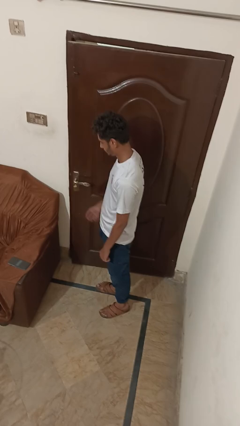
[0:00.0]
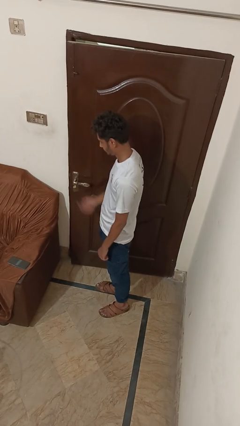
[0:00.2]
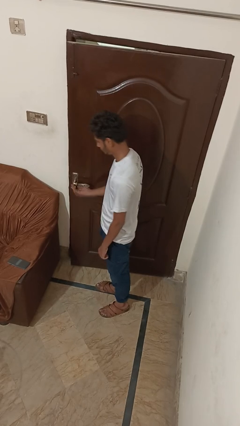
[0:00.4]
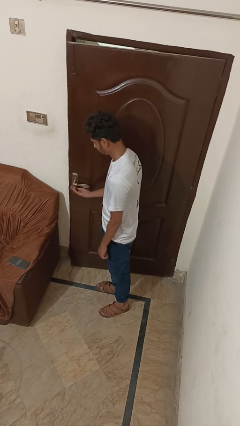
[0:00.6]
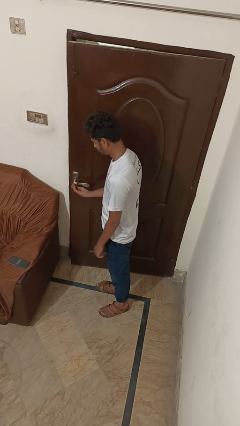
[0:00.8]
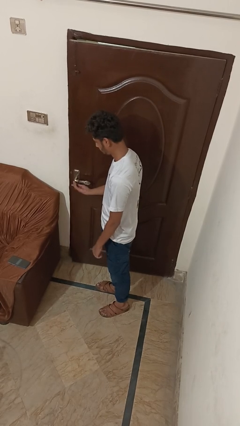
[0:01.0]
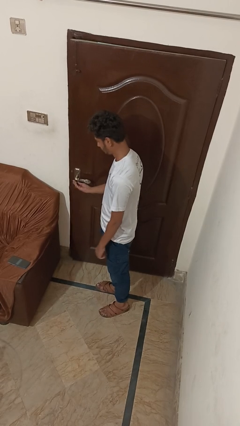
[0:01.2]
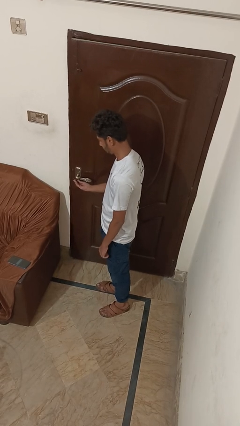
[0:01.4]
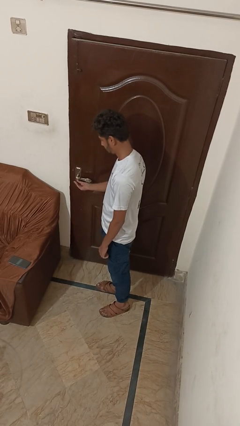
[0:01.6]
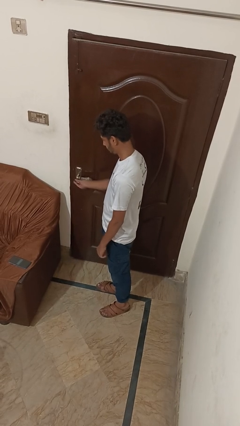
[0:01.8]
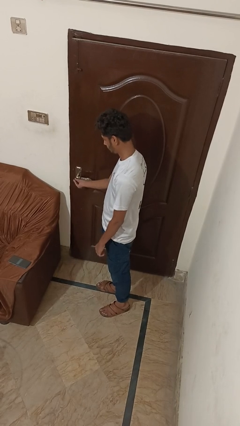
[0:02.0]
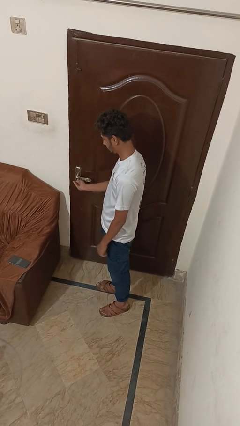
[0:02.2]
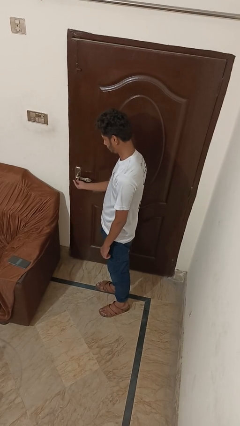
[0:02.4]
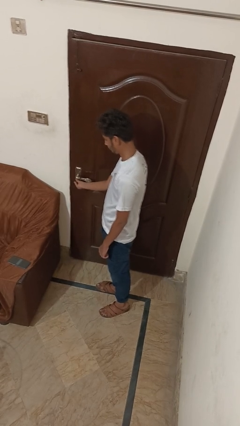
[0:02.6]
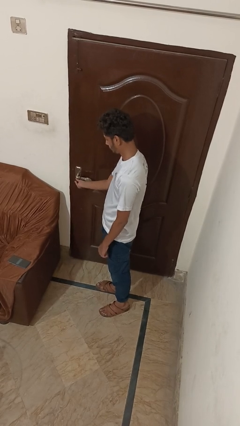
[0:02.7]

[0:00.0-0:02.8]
person locks door with keys

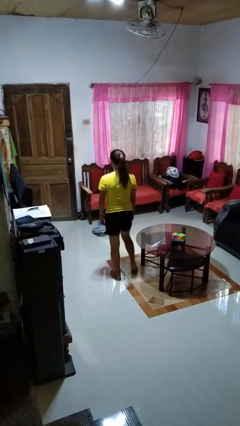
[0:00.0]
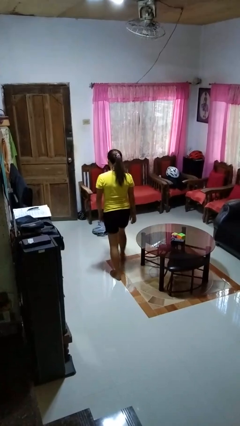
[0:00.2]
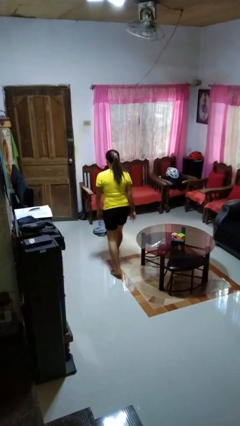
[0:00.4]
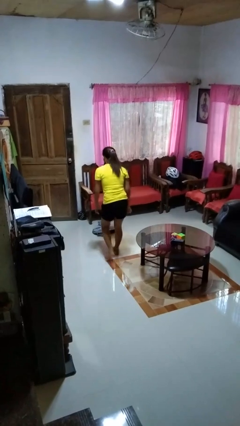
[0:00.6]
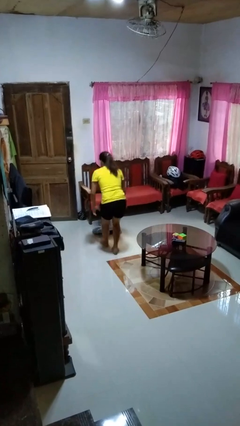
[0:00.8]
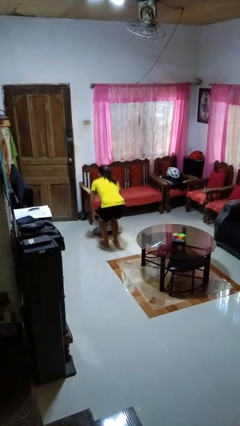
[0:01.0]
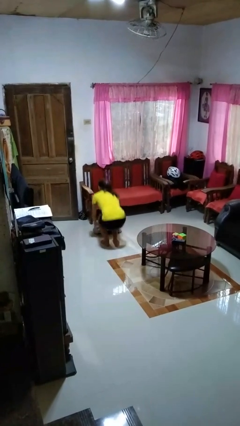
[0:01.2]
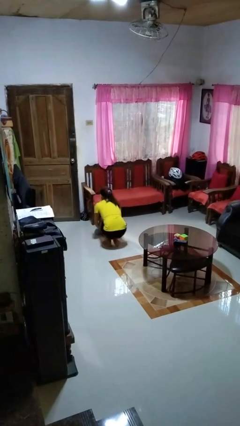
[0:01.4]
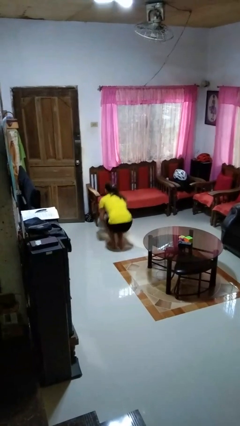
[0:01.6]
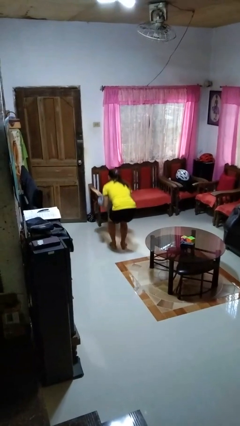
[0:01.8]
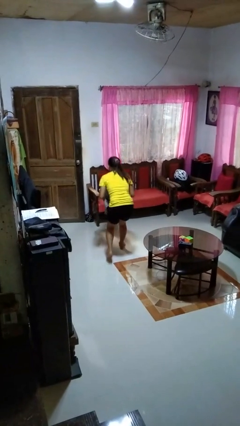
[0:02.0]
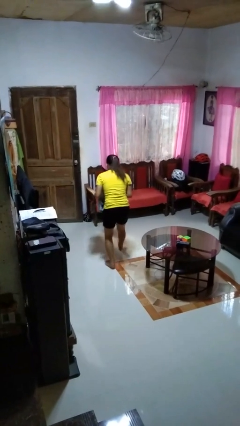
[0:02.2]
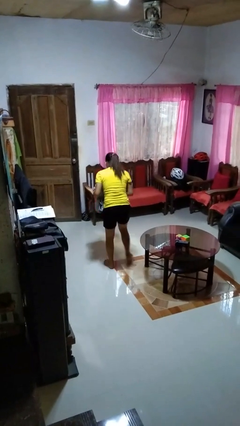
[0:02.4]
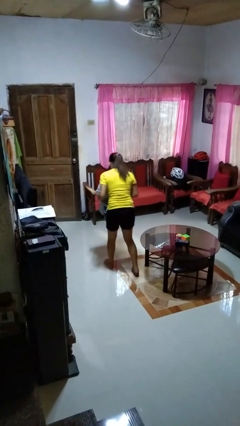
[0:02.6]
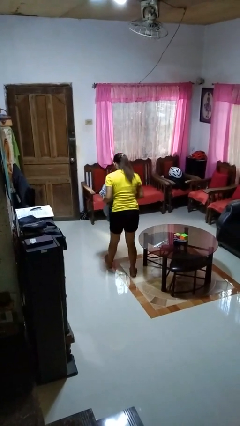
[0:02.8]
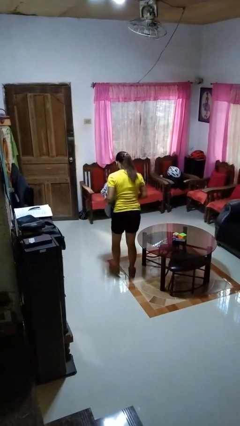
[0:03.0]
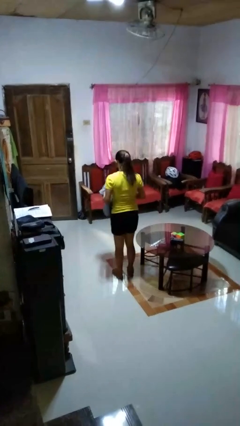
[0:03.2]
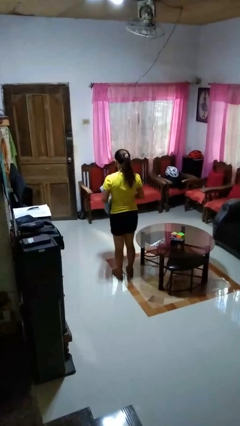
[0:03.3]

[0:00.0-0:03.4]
person picks up object from floor

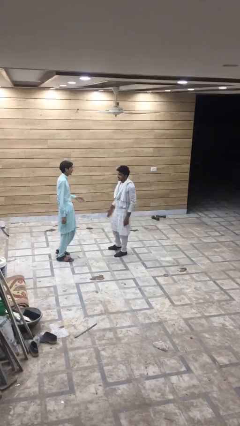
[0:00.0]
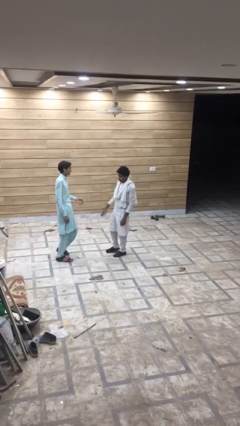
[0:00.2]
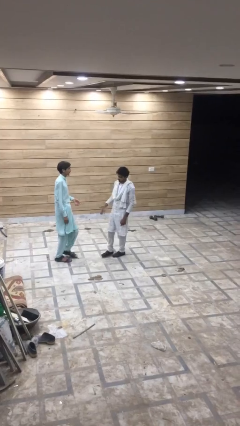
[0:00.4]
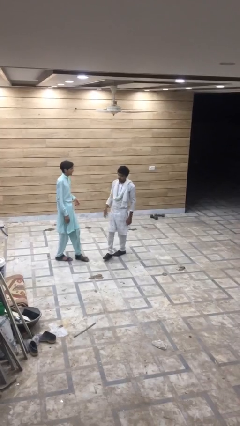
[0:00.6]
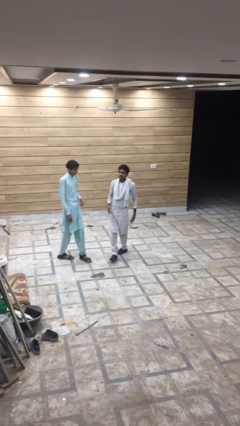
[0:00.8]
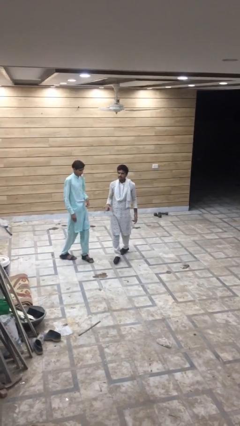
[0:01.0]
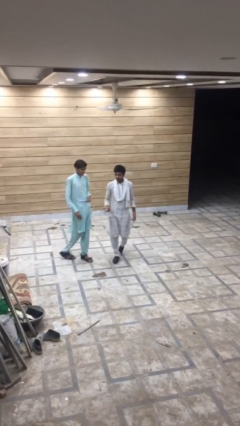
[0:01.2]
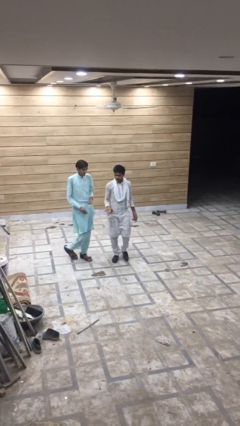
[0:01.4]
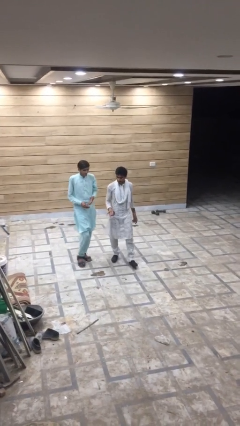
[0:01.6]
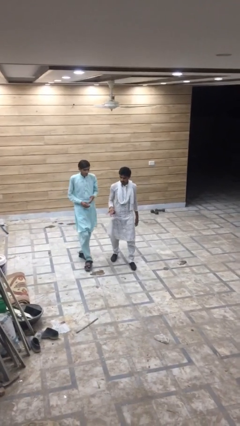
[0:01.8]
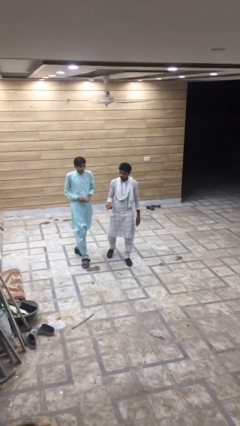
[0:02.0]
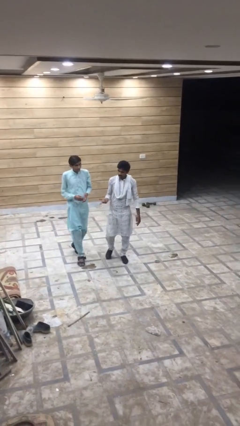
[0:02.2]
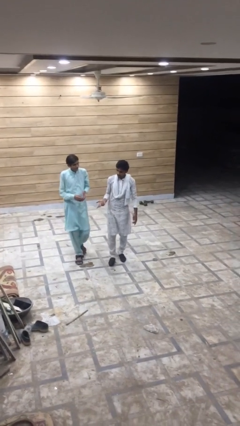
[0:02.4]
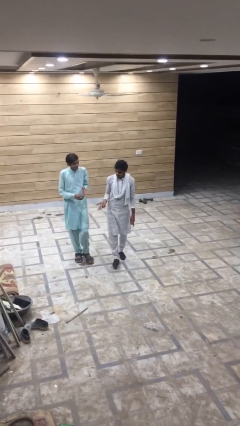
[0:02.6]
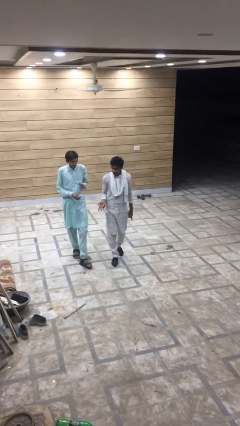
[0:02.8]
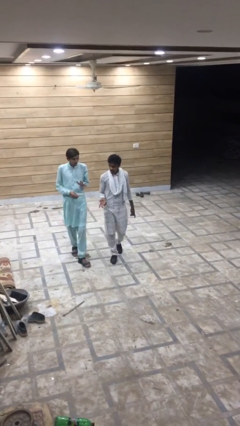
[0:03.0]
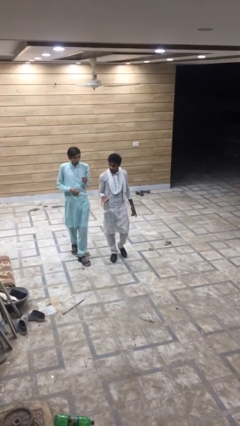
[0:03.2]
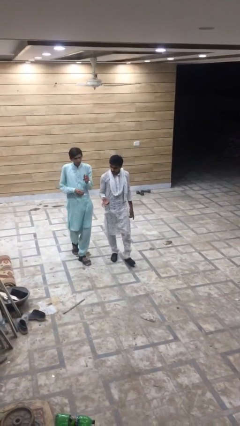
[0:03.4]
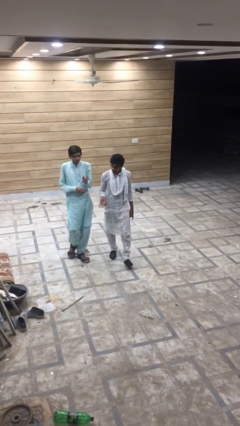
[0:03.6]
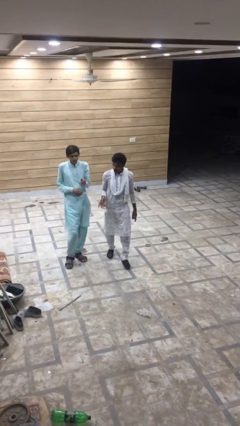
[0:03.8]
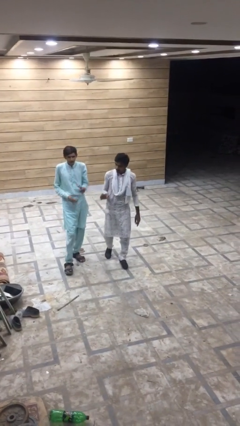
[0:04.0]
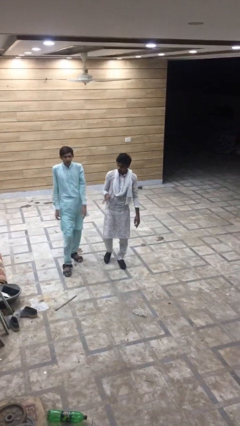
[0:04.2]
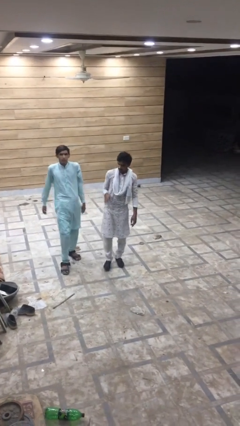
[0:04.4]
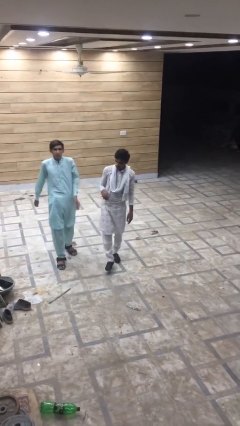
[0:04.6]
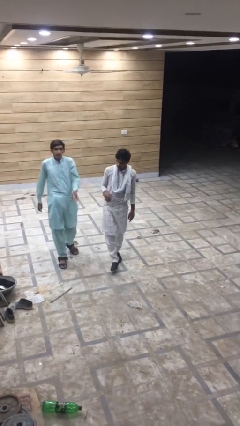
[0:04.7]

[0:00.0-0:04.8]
person talks to person

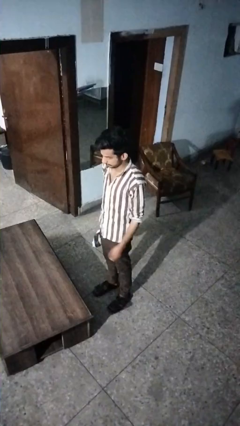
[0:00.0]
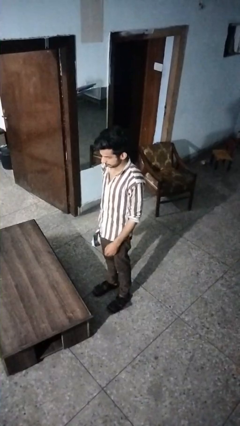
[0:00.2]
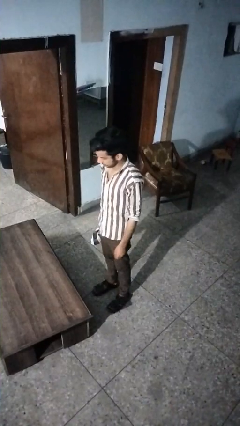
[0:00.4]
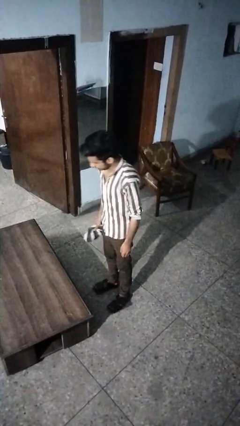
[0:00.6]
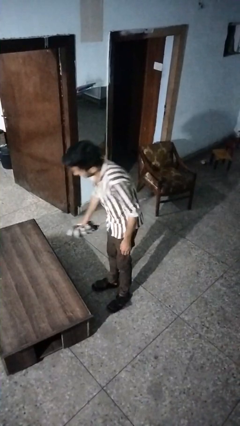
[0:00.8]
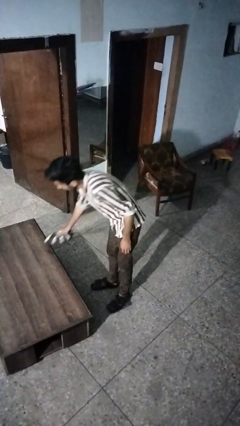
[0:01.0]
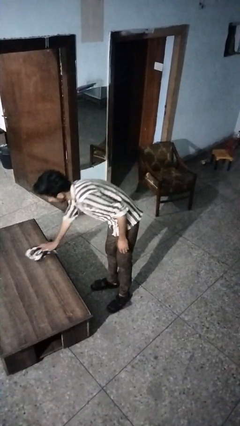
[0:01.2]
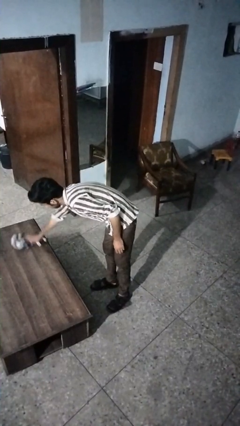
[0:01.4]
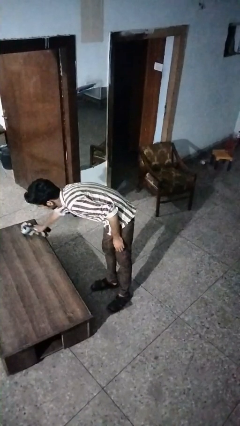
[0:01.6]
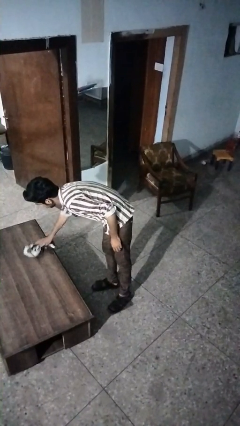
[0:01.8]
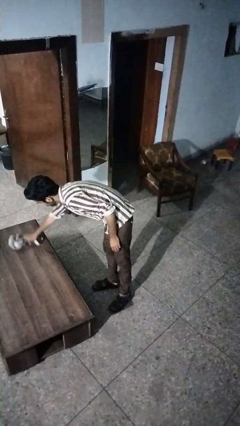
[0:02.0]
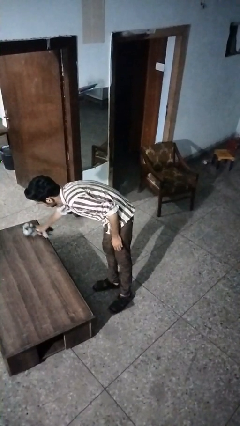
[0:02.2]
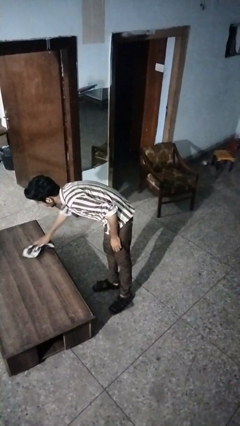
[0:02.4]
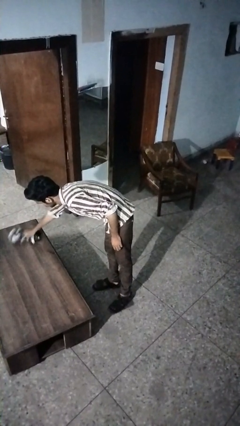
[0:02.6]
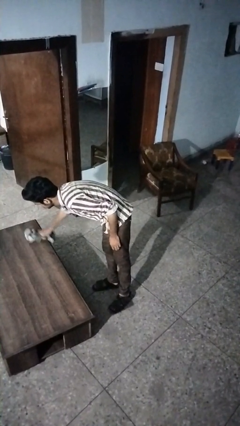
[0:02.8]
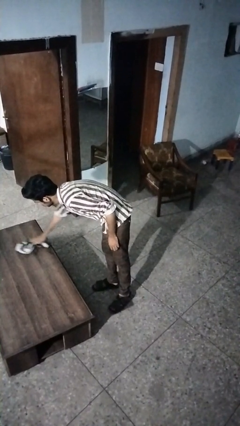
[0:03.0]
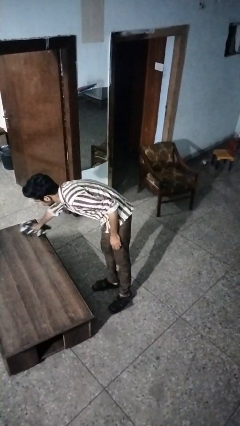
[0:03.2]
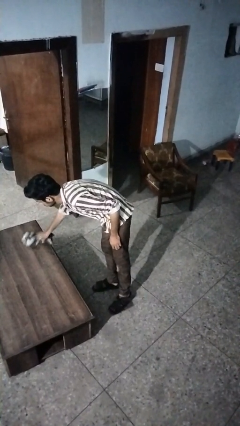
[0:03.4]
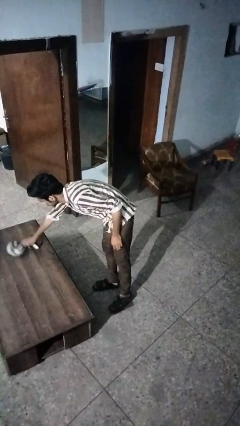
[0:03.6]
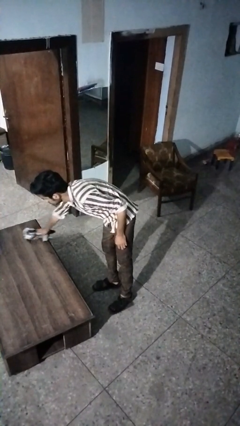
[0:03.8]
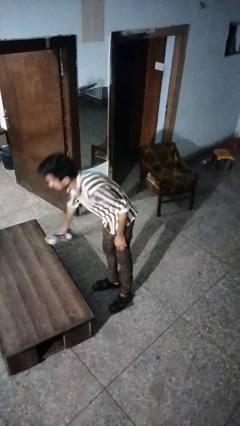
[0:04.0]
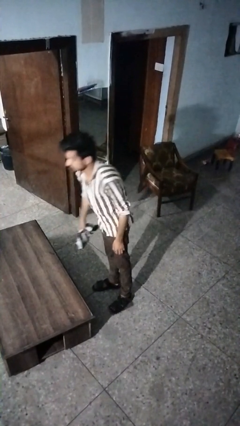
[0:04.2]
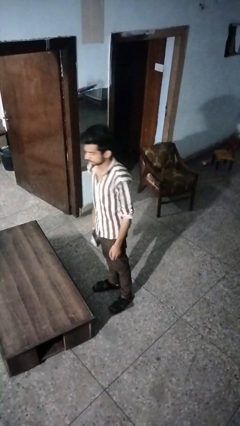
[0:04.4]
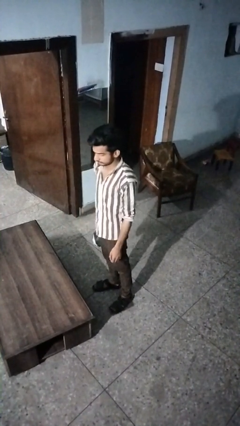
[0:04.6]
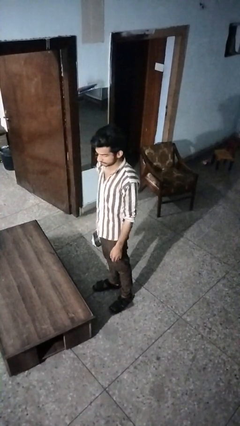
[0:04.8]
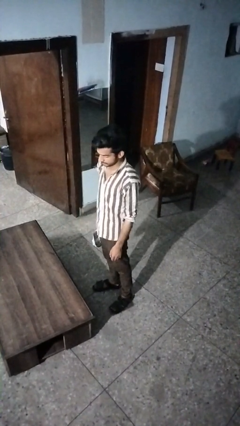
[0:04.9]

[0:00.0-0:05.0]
person cleans table with rag

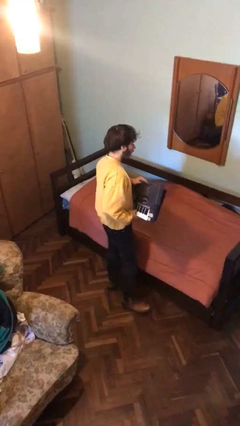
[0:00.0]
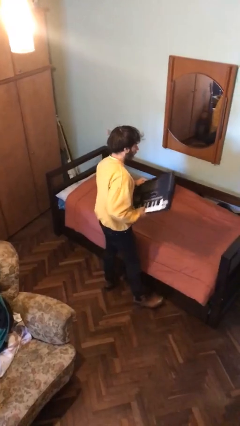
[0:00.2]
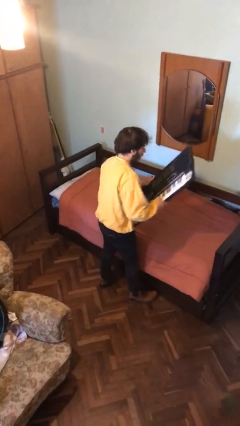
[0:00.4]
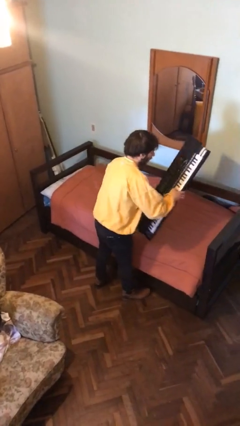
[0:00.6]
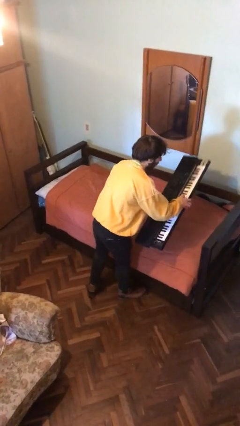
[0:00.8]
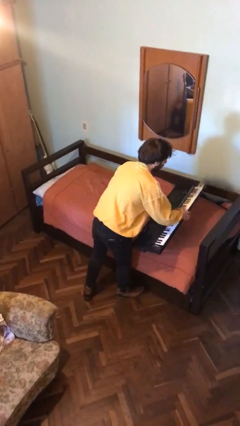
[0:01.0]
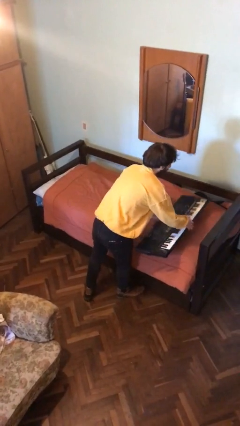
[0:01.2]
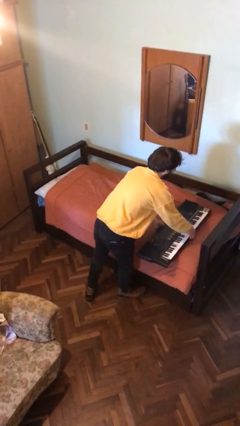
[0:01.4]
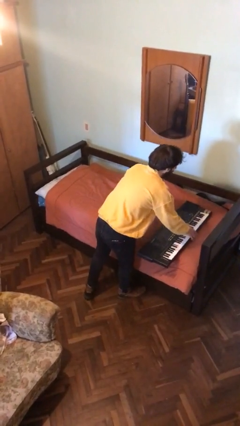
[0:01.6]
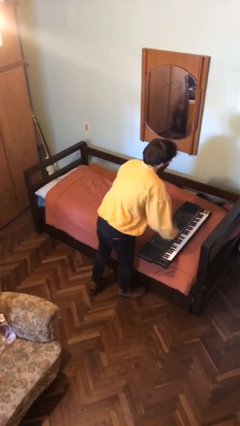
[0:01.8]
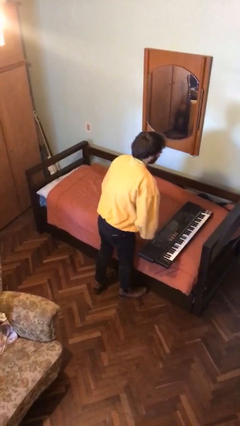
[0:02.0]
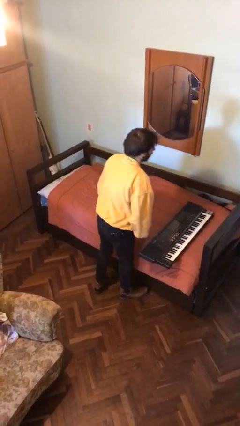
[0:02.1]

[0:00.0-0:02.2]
person puts down object on bed
